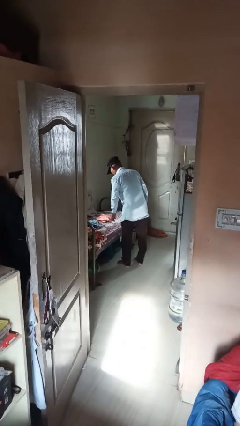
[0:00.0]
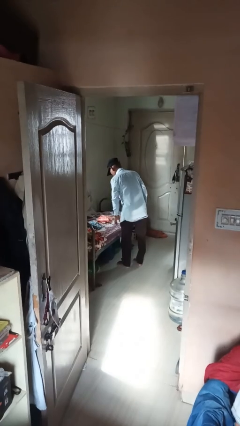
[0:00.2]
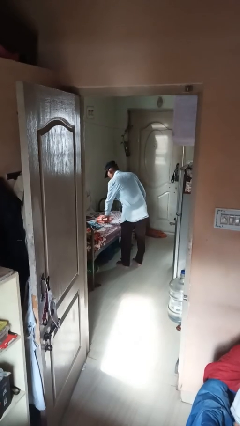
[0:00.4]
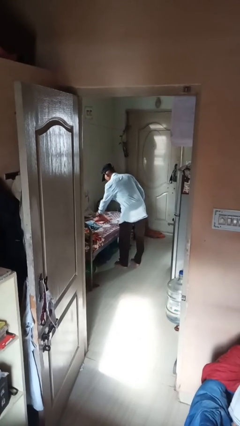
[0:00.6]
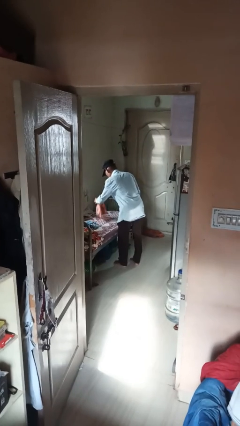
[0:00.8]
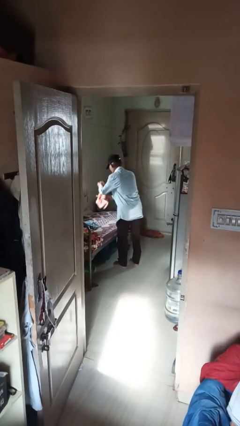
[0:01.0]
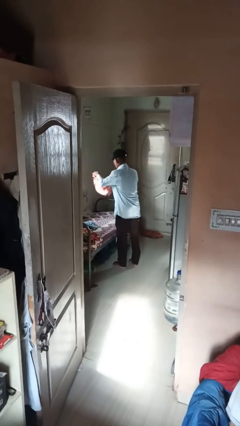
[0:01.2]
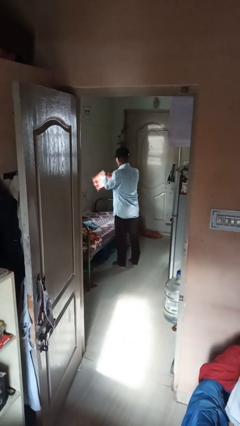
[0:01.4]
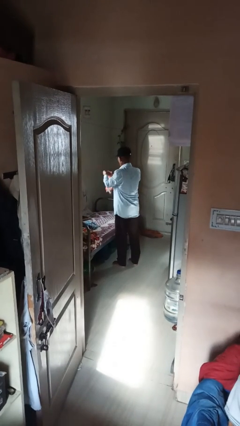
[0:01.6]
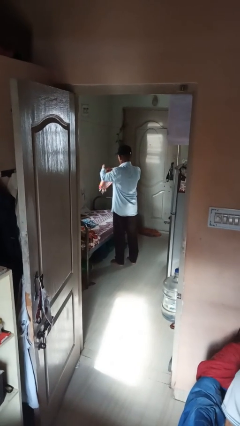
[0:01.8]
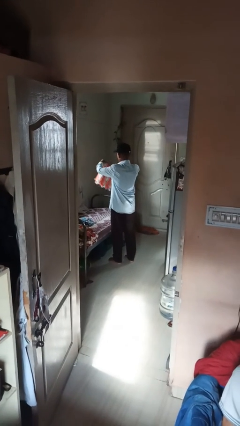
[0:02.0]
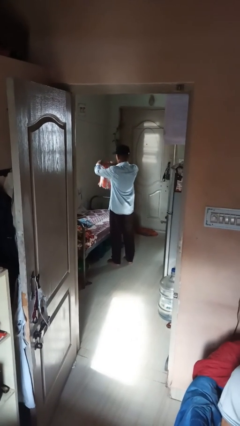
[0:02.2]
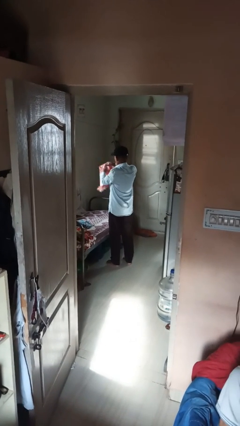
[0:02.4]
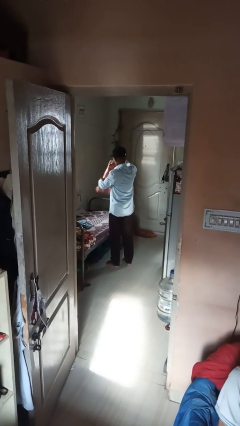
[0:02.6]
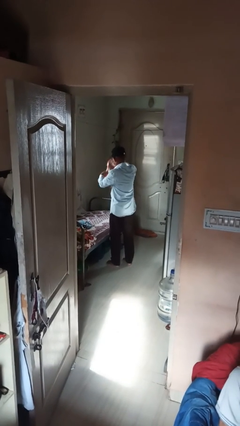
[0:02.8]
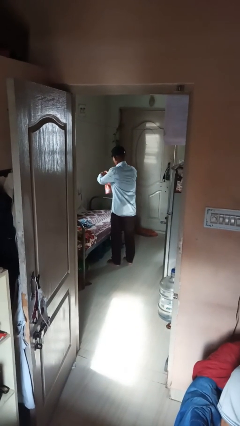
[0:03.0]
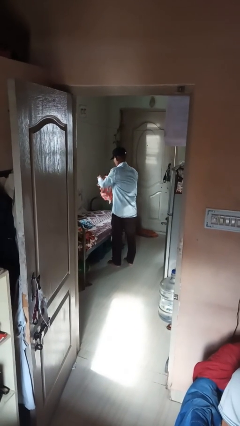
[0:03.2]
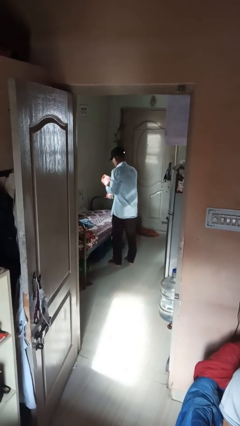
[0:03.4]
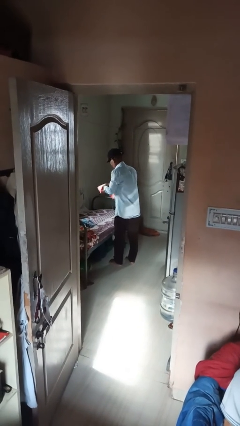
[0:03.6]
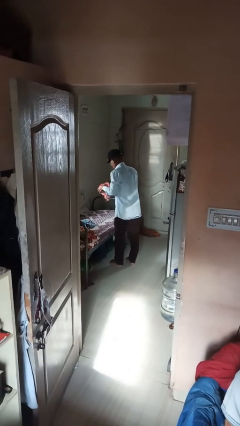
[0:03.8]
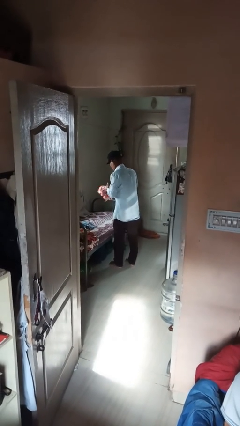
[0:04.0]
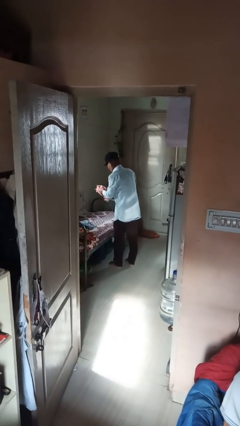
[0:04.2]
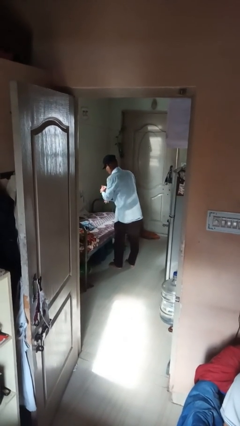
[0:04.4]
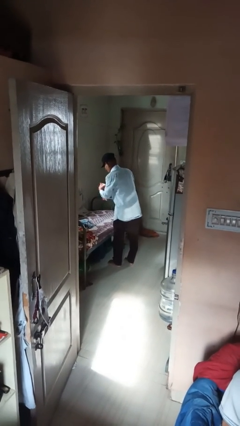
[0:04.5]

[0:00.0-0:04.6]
person folds towel

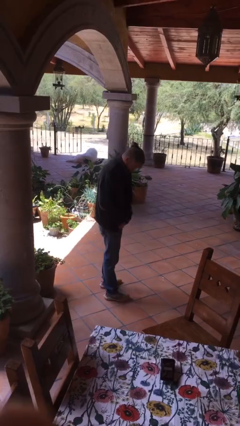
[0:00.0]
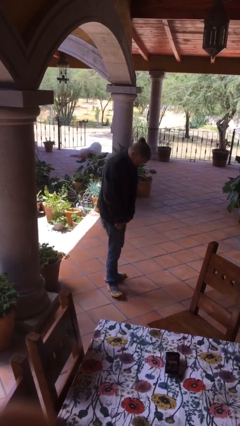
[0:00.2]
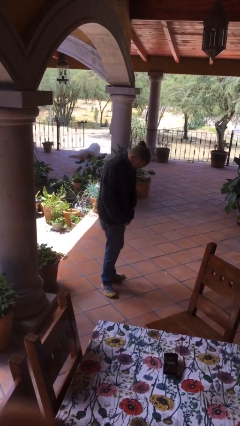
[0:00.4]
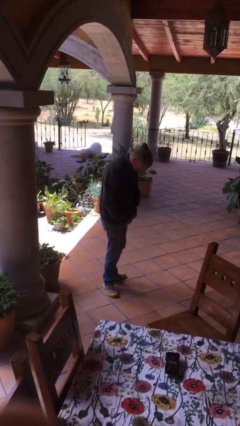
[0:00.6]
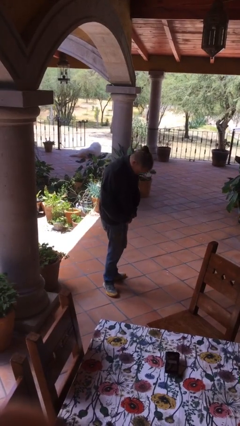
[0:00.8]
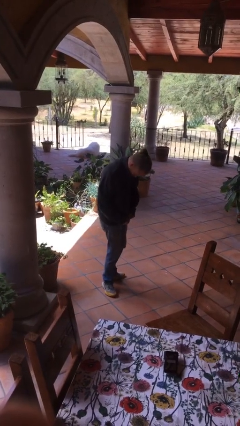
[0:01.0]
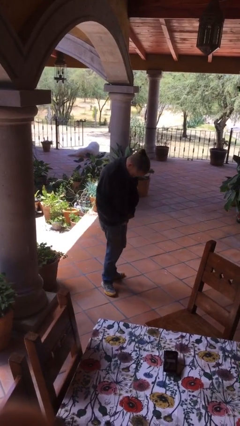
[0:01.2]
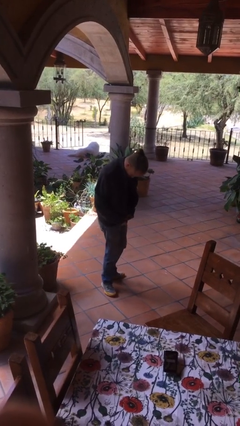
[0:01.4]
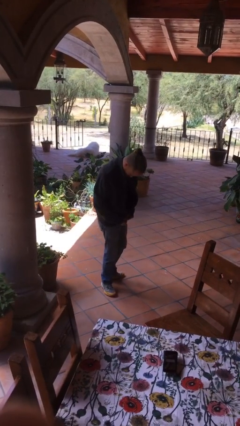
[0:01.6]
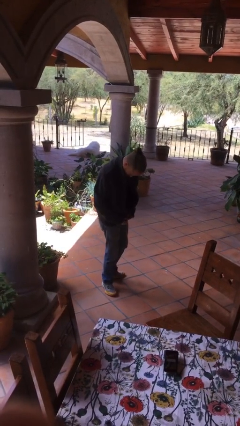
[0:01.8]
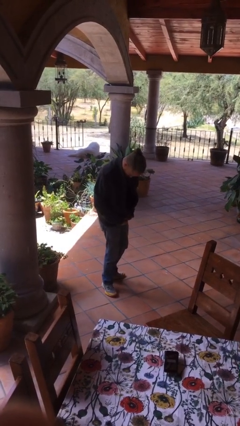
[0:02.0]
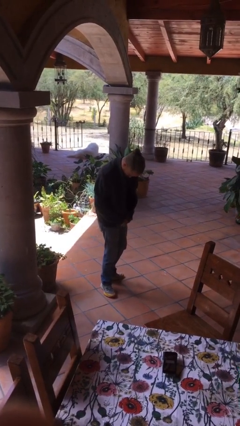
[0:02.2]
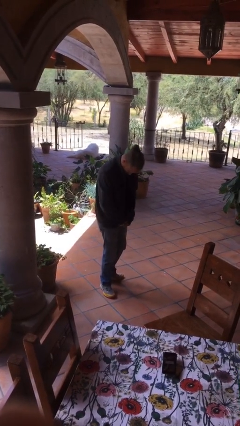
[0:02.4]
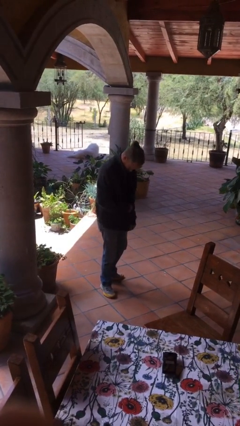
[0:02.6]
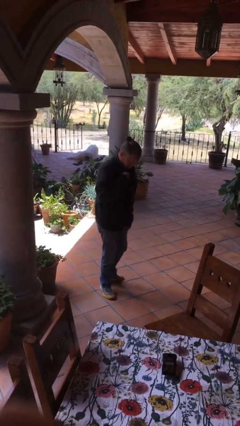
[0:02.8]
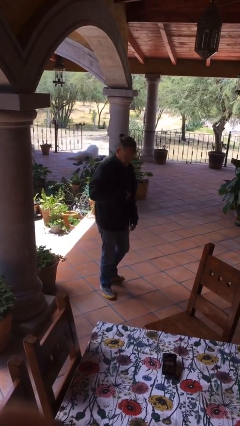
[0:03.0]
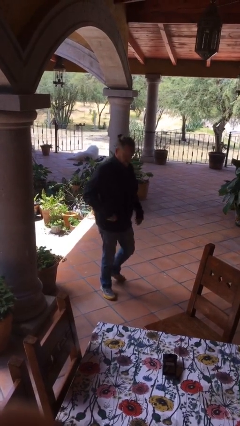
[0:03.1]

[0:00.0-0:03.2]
person zips up jacket

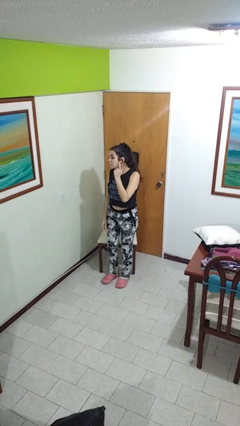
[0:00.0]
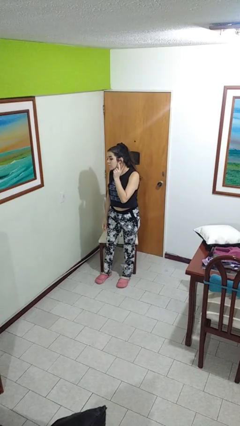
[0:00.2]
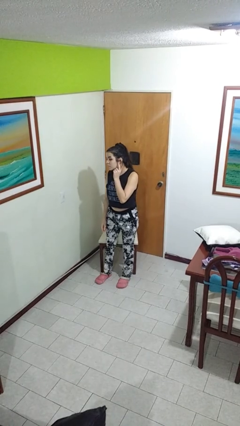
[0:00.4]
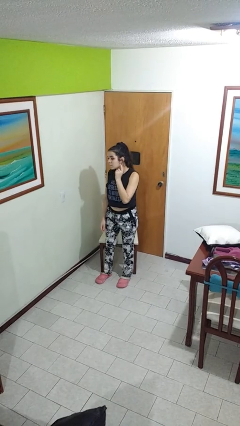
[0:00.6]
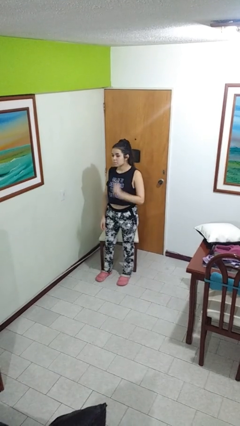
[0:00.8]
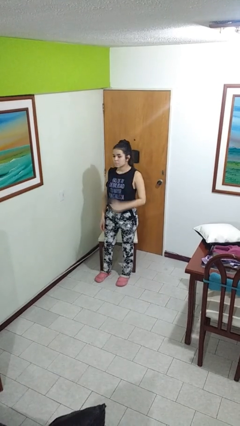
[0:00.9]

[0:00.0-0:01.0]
person gestures listen closely

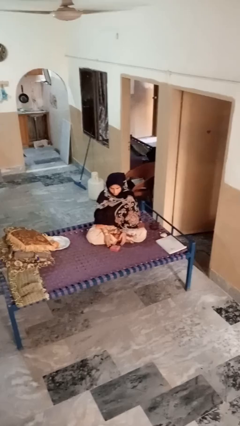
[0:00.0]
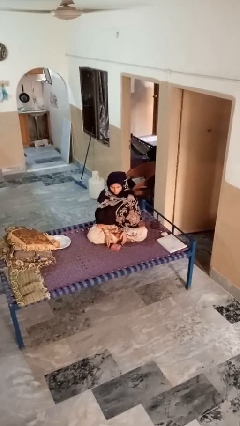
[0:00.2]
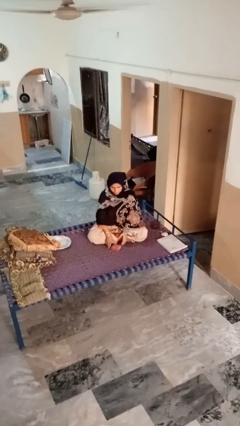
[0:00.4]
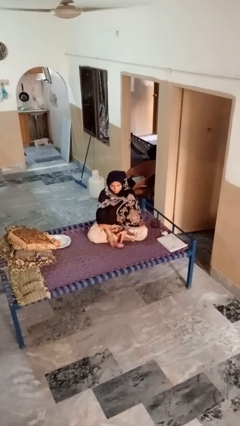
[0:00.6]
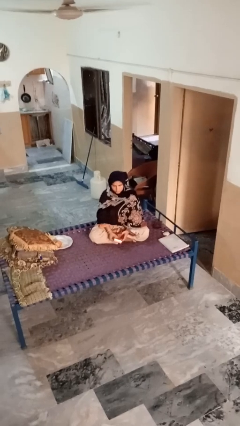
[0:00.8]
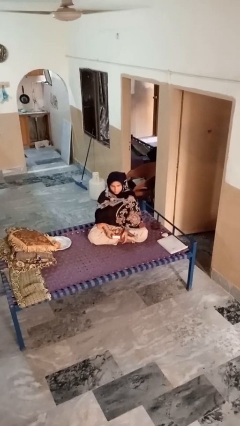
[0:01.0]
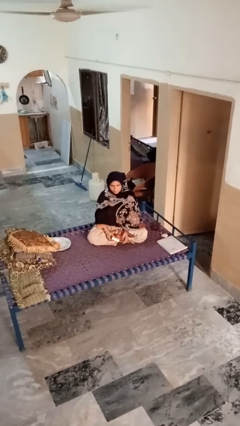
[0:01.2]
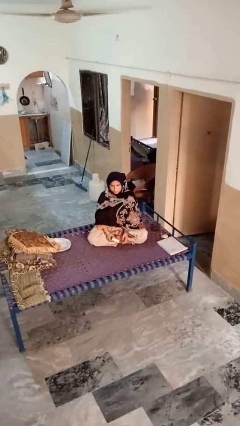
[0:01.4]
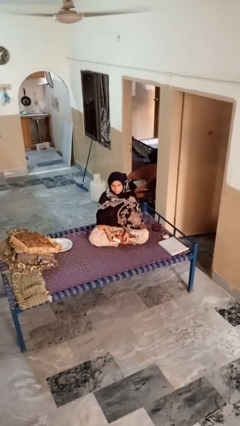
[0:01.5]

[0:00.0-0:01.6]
person picks up object from floor

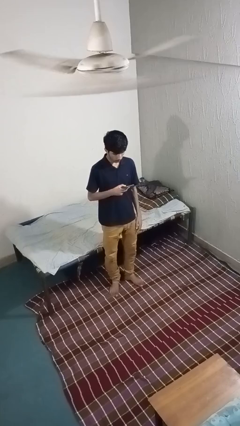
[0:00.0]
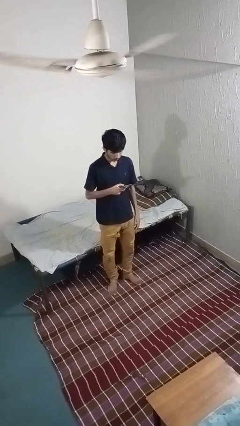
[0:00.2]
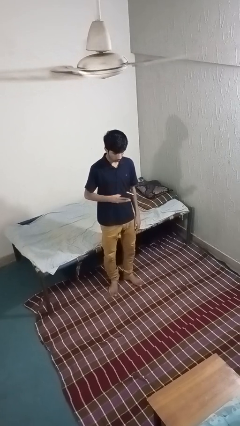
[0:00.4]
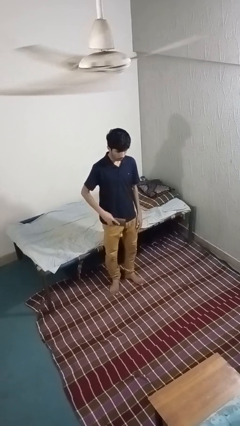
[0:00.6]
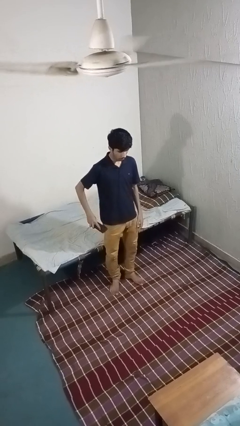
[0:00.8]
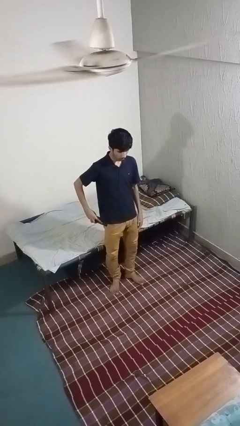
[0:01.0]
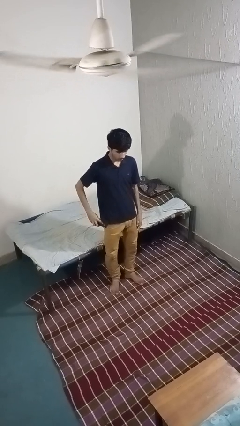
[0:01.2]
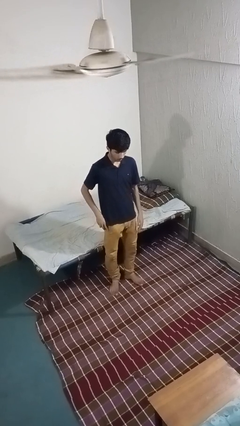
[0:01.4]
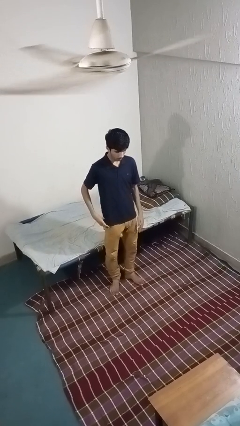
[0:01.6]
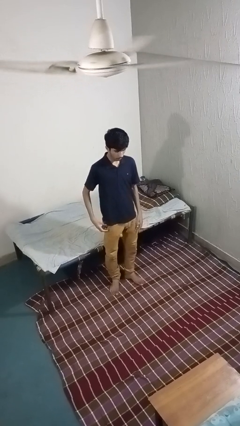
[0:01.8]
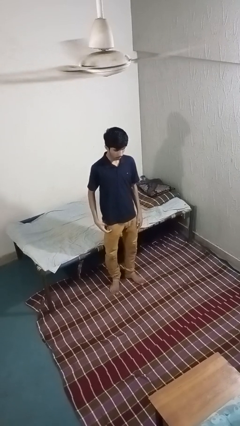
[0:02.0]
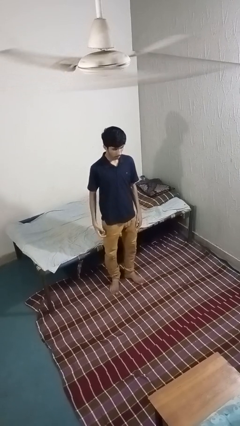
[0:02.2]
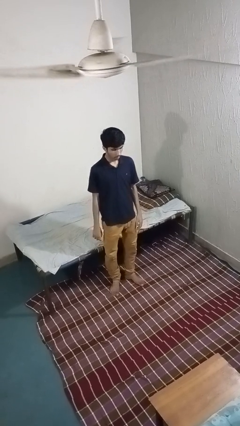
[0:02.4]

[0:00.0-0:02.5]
person puts phone into pocket

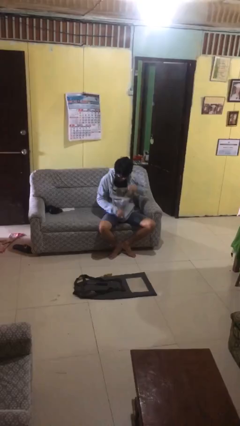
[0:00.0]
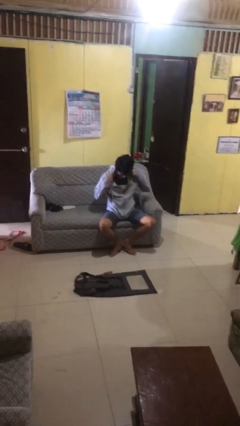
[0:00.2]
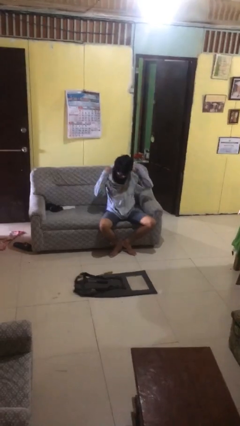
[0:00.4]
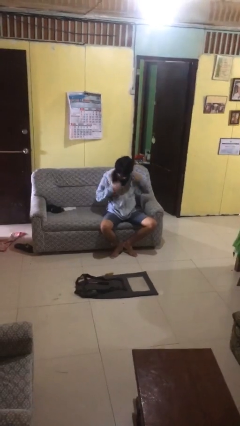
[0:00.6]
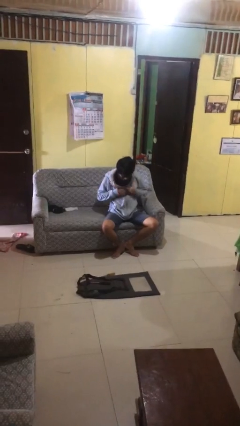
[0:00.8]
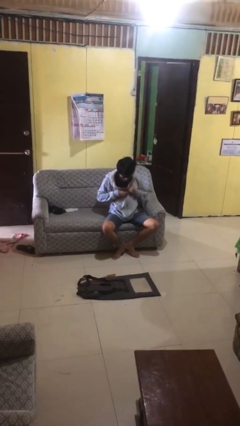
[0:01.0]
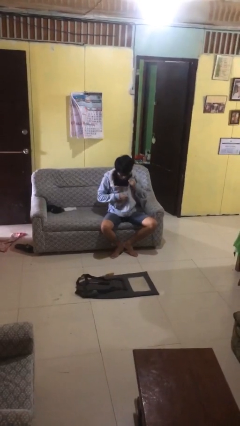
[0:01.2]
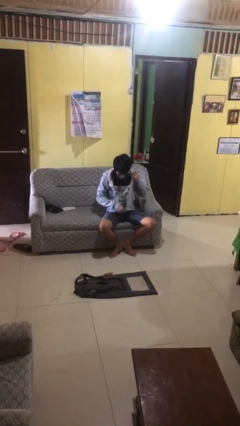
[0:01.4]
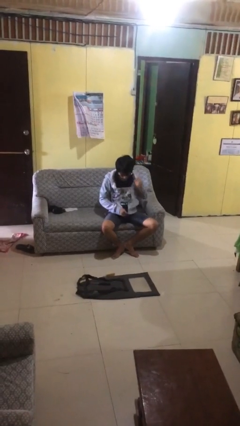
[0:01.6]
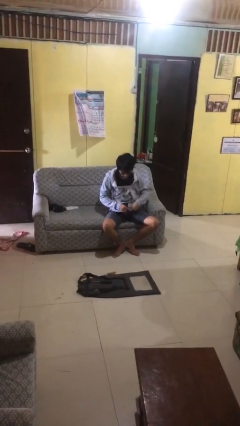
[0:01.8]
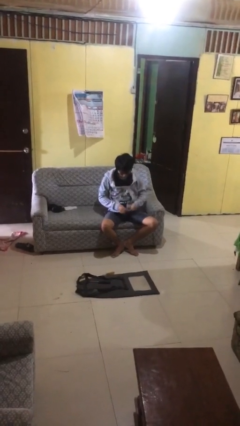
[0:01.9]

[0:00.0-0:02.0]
person unzips jacket

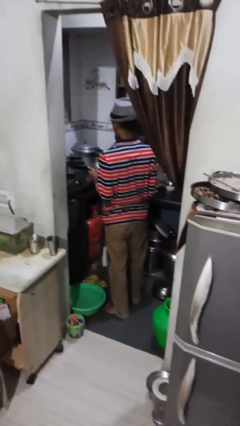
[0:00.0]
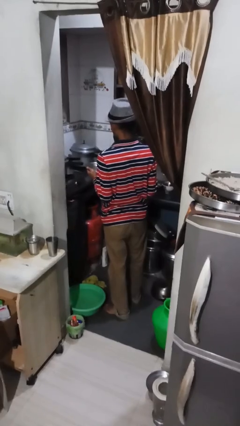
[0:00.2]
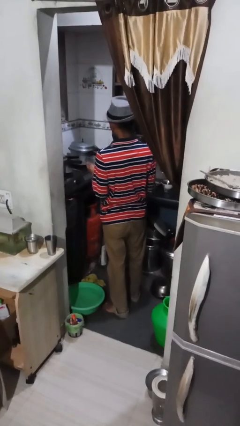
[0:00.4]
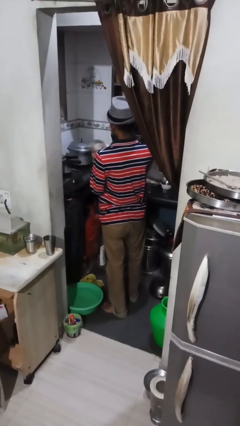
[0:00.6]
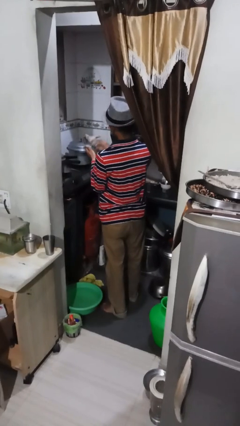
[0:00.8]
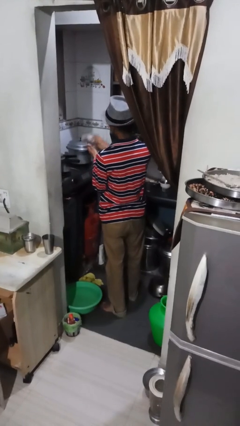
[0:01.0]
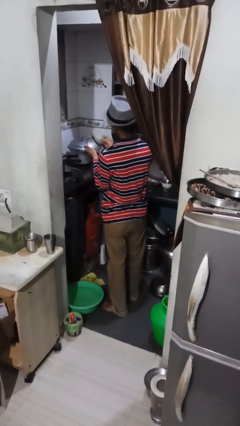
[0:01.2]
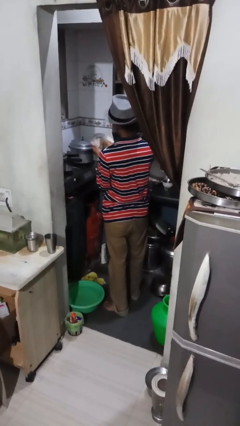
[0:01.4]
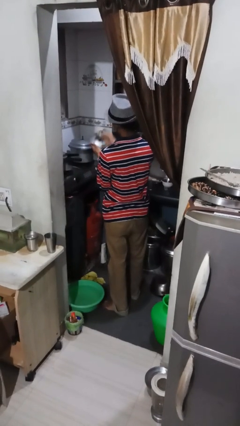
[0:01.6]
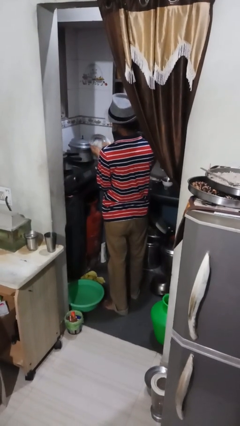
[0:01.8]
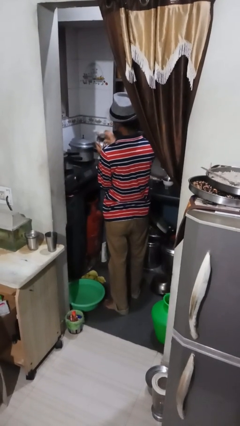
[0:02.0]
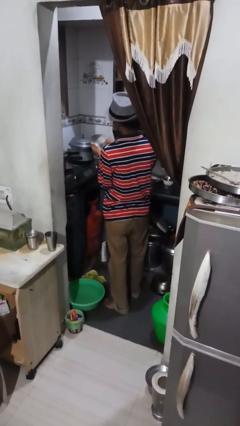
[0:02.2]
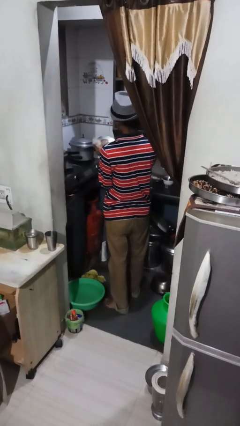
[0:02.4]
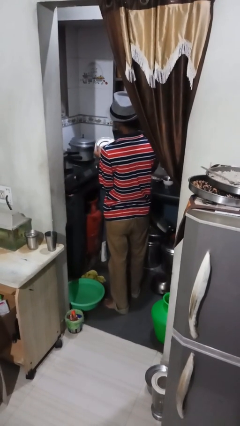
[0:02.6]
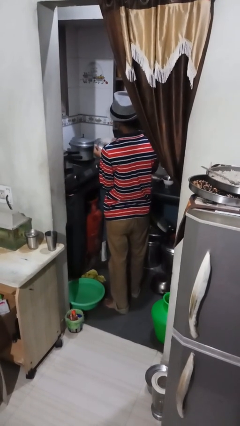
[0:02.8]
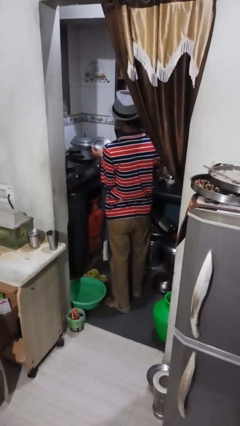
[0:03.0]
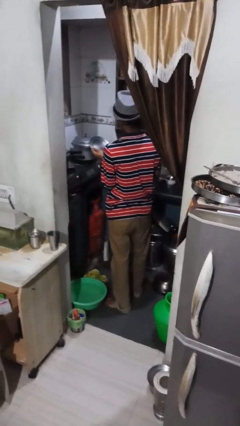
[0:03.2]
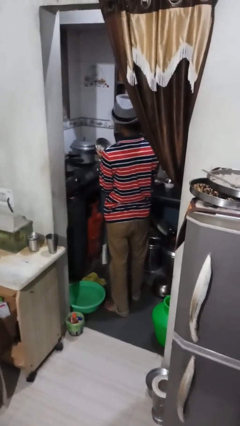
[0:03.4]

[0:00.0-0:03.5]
person dries dish
